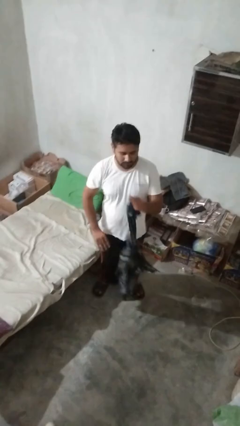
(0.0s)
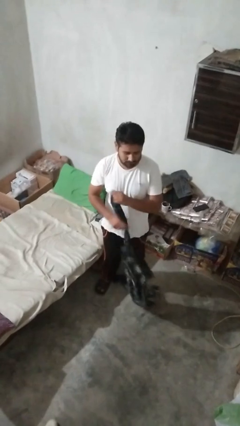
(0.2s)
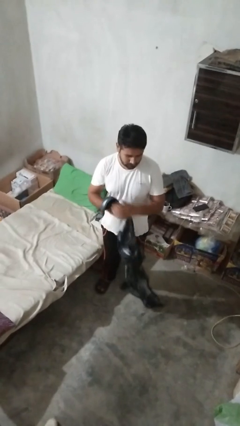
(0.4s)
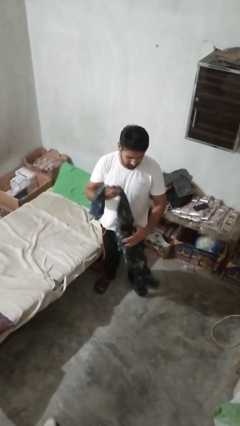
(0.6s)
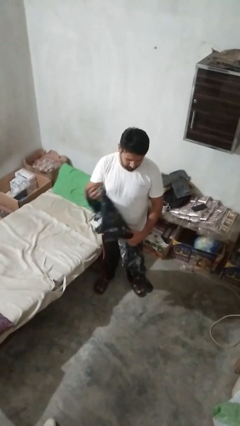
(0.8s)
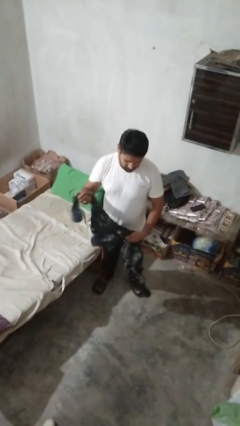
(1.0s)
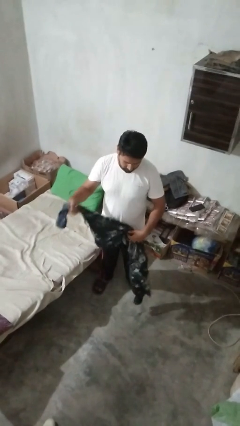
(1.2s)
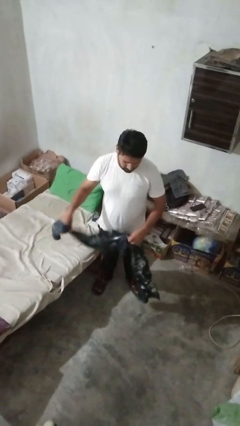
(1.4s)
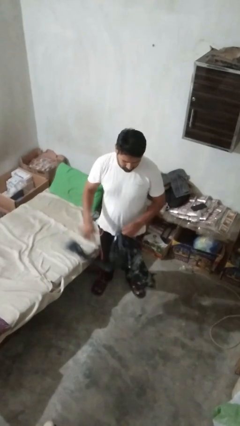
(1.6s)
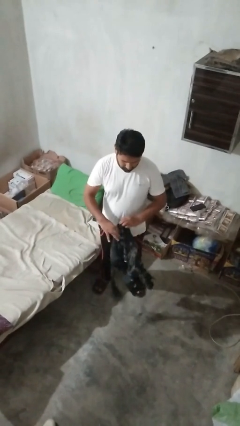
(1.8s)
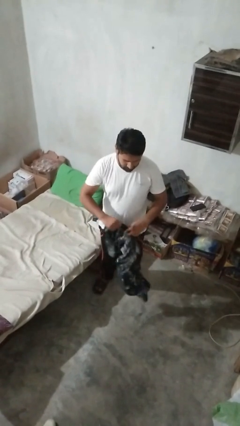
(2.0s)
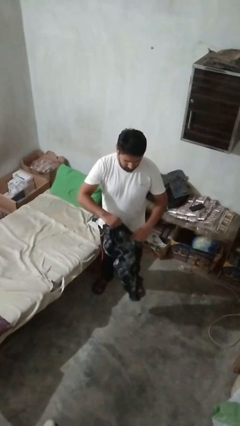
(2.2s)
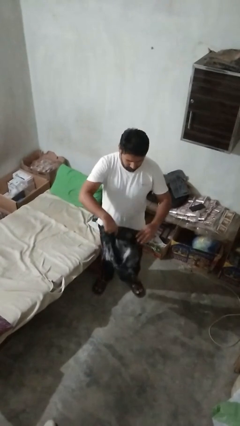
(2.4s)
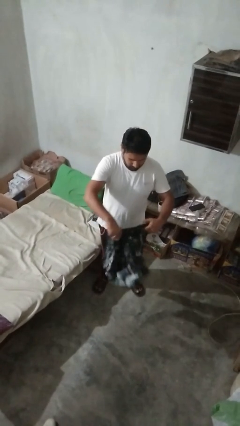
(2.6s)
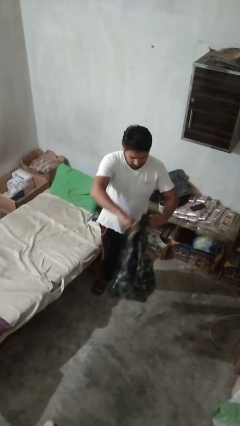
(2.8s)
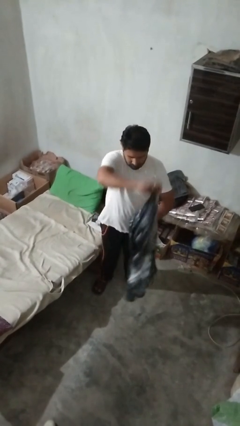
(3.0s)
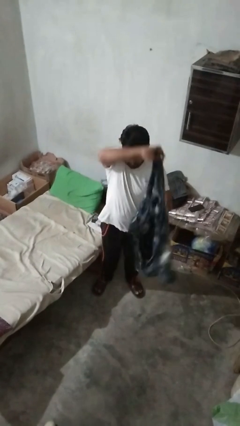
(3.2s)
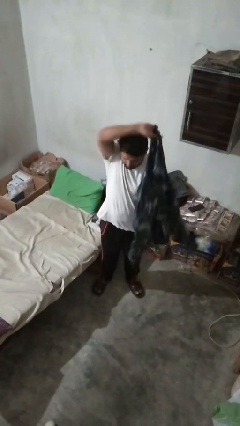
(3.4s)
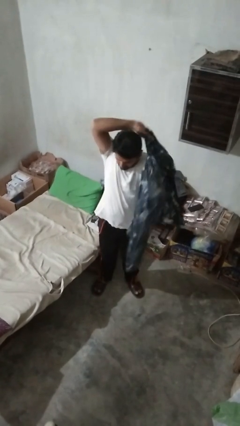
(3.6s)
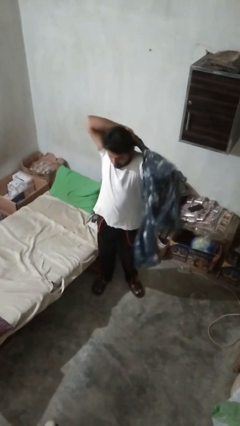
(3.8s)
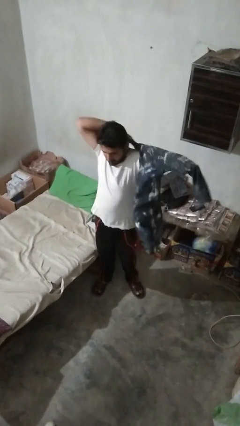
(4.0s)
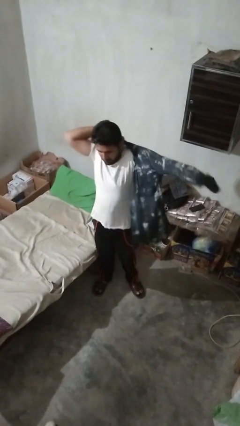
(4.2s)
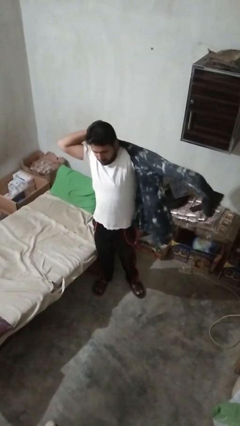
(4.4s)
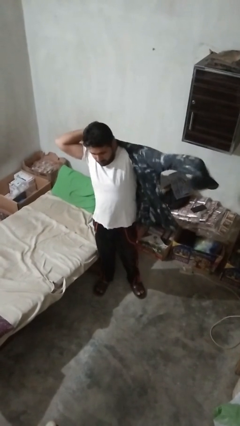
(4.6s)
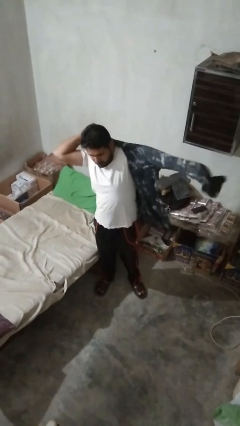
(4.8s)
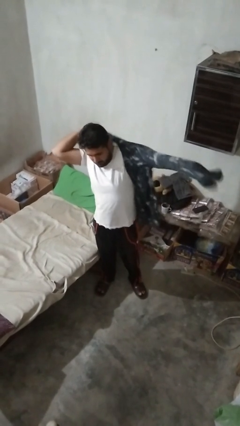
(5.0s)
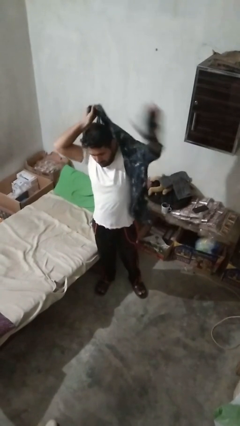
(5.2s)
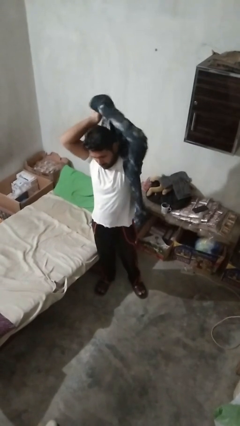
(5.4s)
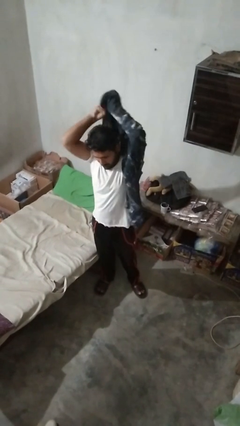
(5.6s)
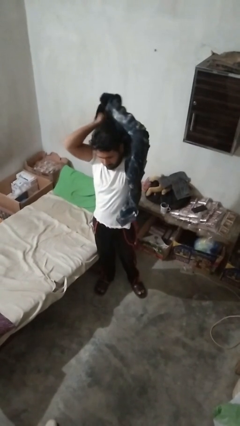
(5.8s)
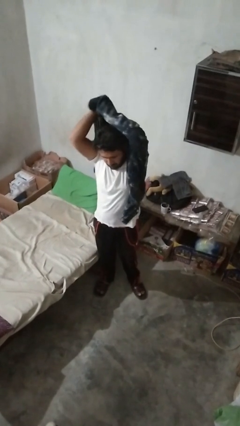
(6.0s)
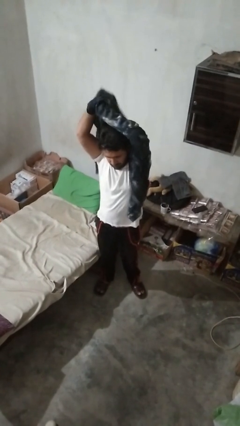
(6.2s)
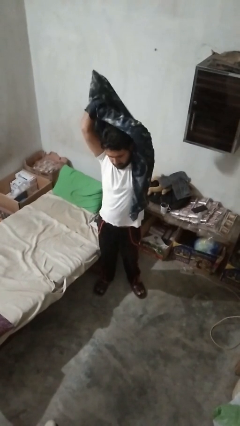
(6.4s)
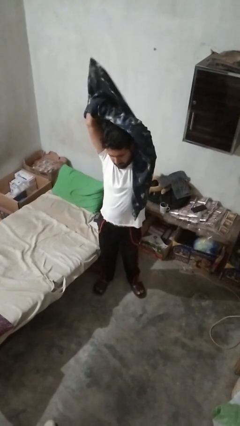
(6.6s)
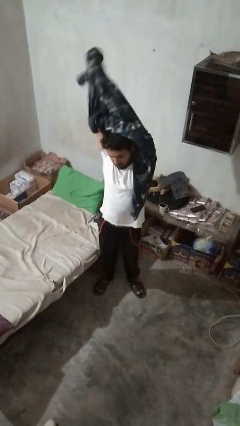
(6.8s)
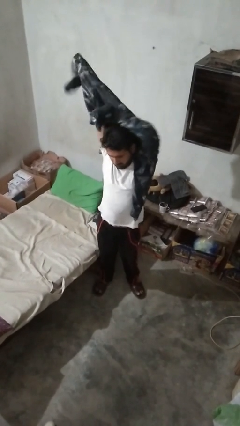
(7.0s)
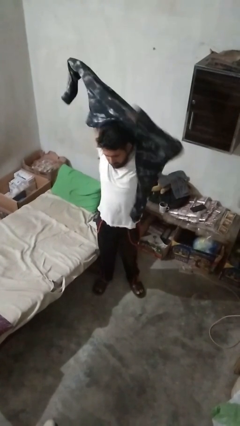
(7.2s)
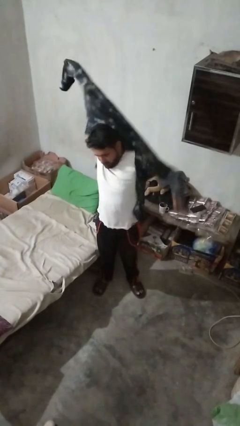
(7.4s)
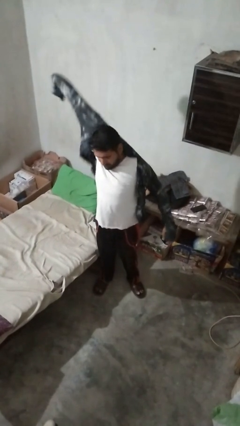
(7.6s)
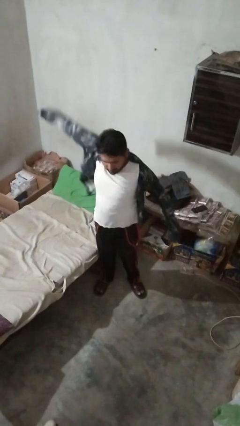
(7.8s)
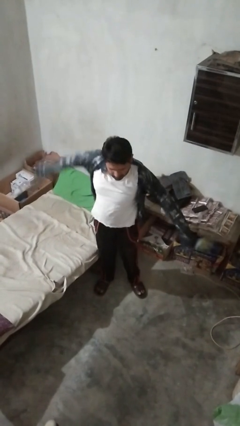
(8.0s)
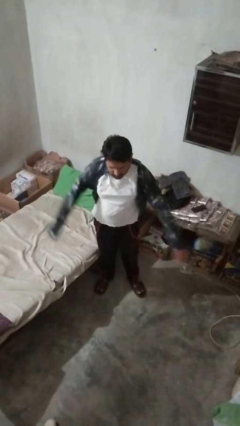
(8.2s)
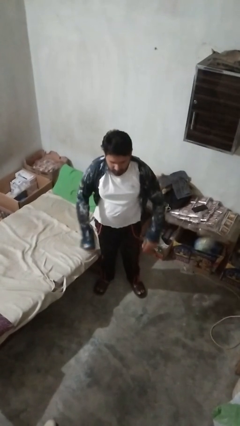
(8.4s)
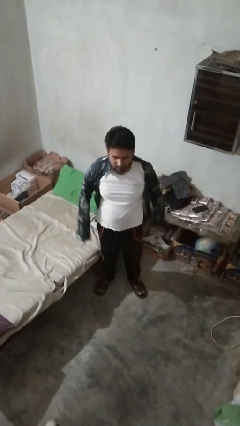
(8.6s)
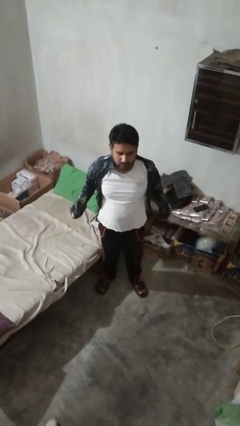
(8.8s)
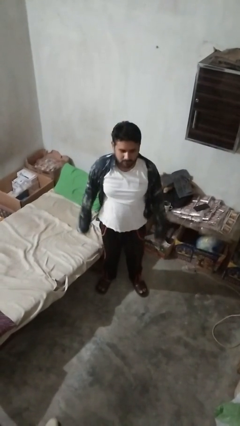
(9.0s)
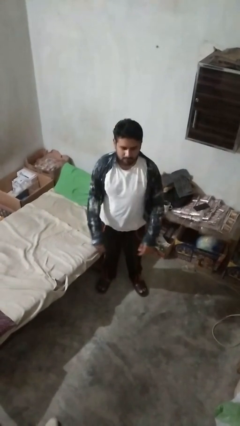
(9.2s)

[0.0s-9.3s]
person puts on shirt

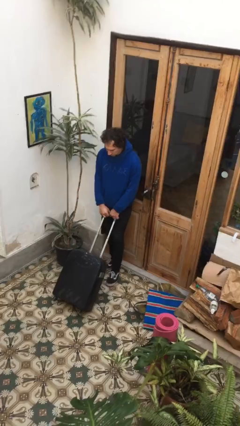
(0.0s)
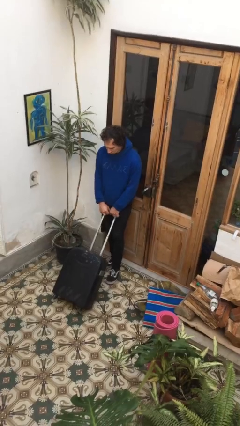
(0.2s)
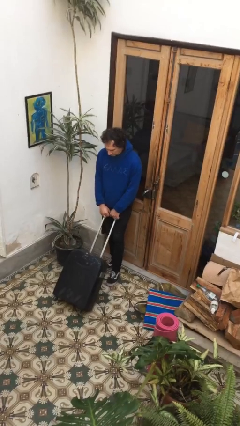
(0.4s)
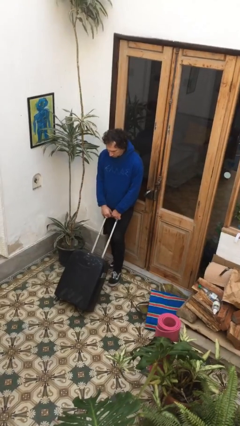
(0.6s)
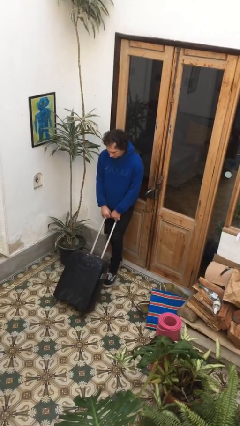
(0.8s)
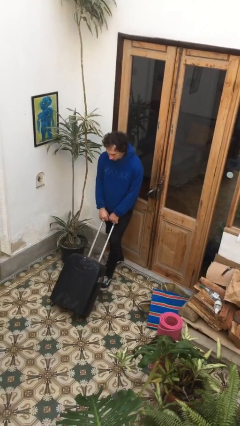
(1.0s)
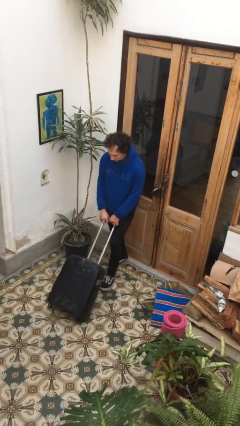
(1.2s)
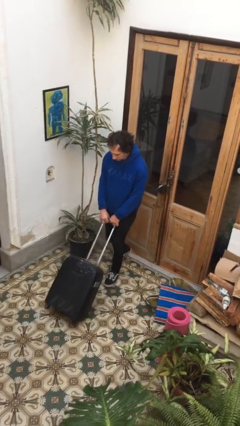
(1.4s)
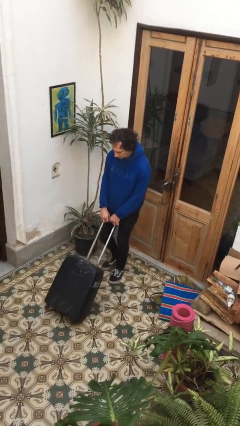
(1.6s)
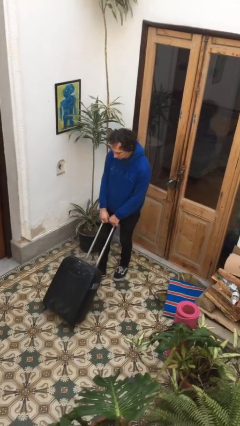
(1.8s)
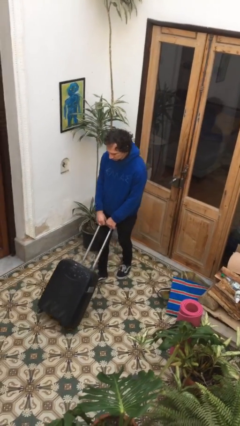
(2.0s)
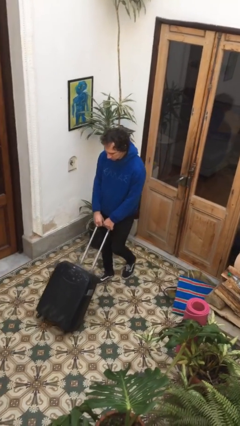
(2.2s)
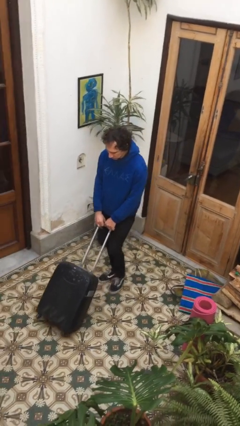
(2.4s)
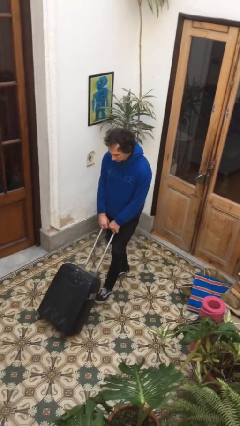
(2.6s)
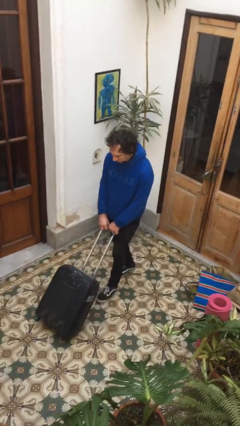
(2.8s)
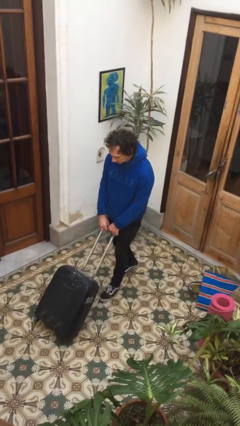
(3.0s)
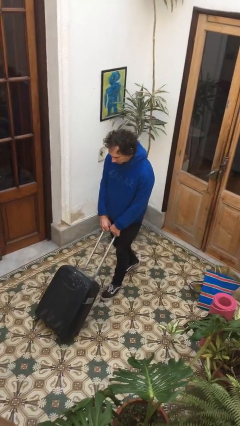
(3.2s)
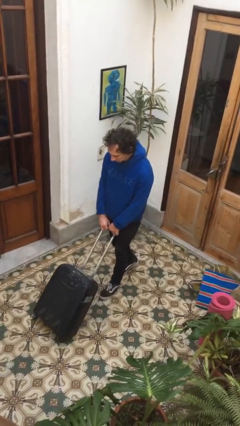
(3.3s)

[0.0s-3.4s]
person pushes wheeled cart

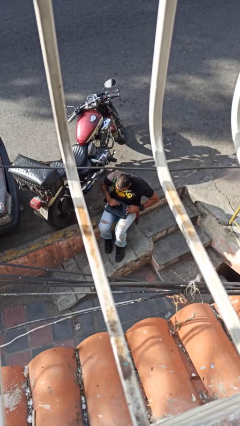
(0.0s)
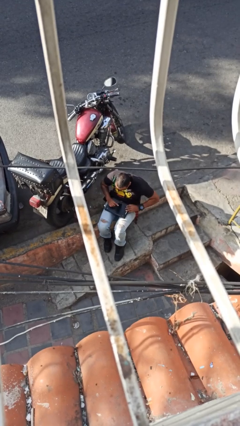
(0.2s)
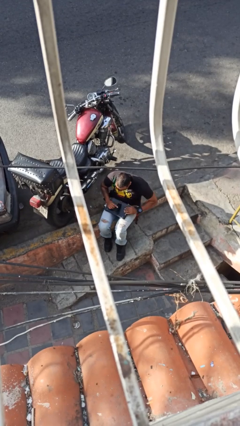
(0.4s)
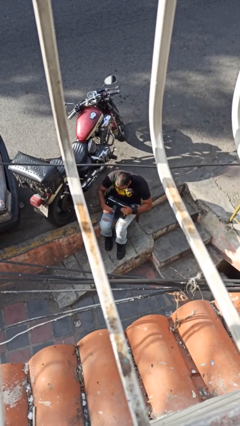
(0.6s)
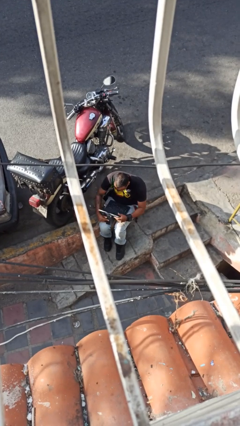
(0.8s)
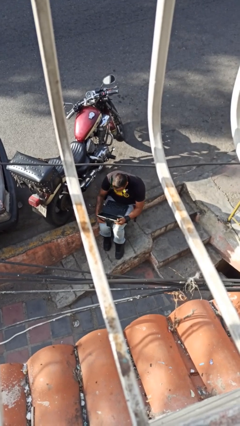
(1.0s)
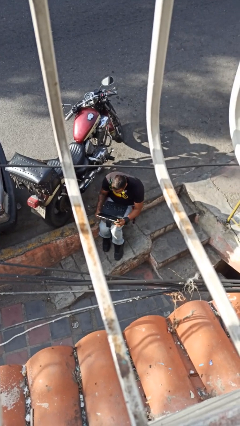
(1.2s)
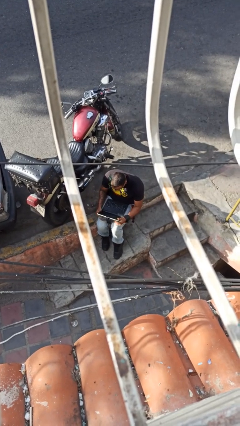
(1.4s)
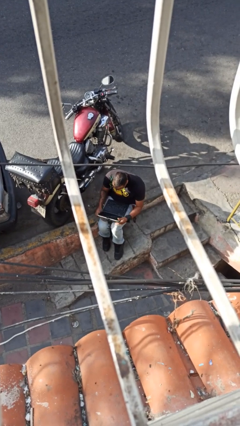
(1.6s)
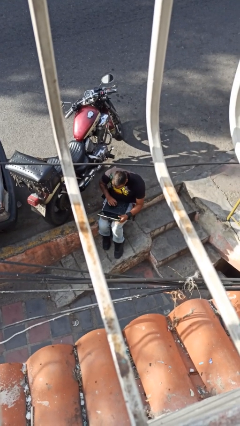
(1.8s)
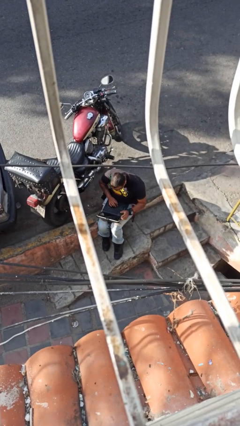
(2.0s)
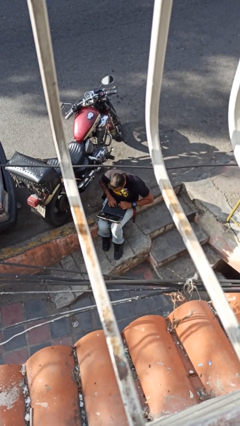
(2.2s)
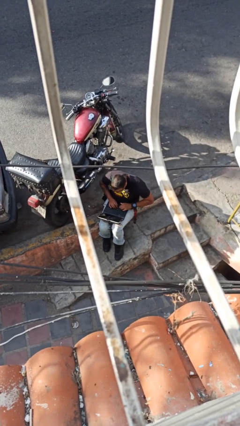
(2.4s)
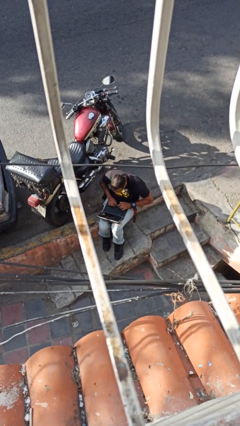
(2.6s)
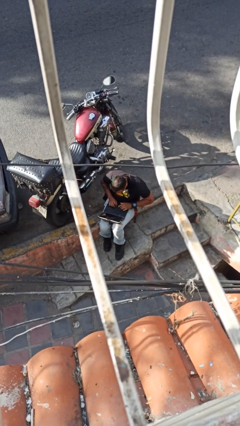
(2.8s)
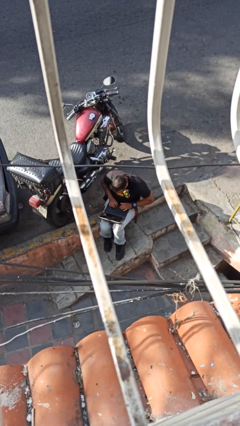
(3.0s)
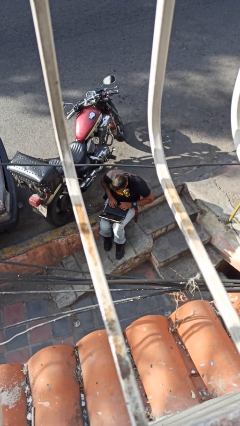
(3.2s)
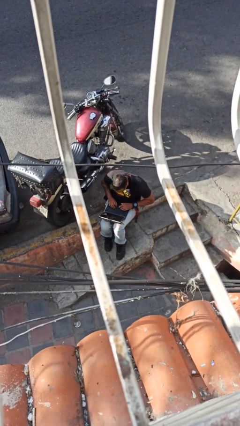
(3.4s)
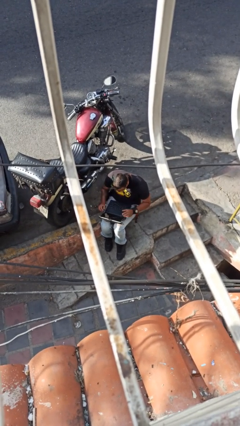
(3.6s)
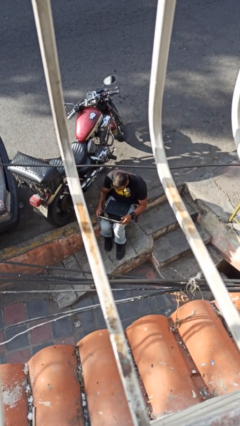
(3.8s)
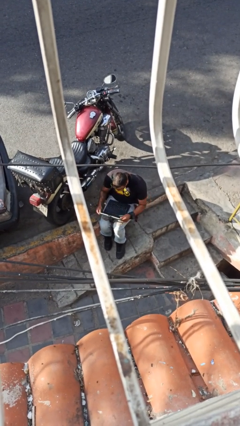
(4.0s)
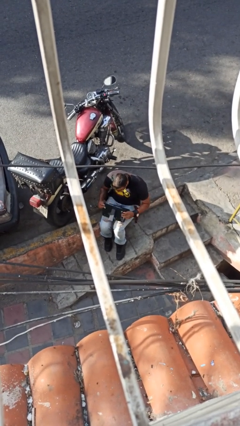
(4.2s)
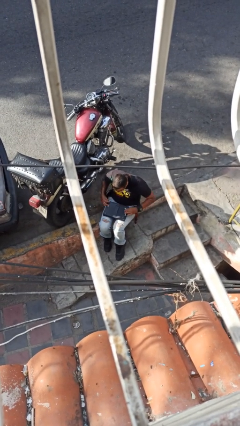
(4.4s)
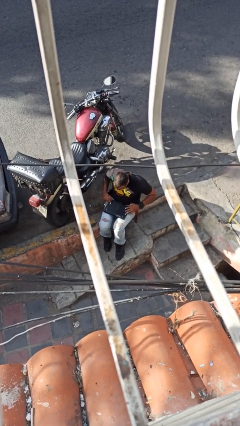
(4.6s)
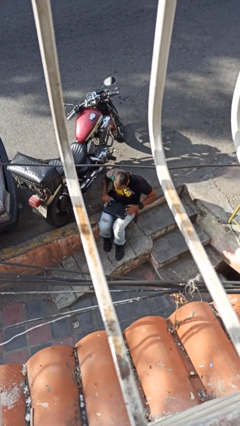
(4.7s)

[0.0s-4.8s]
person interacts with laptop

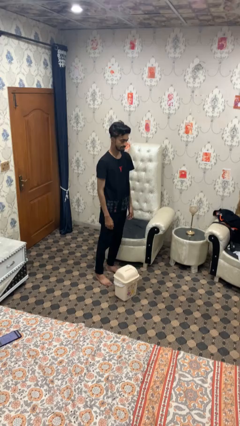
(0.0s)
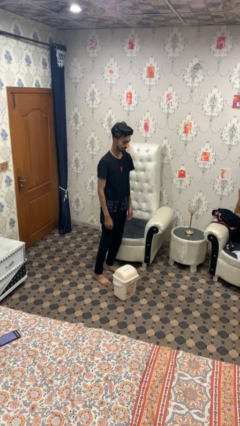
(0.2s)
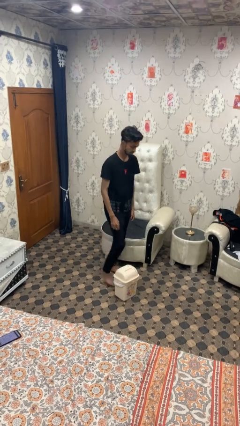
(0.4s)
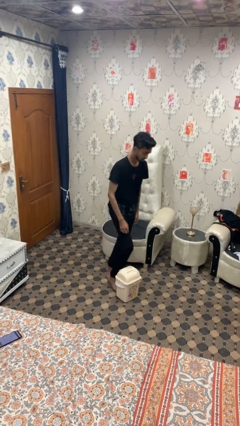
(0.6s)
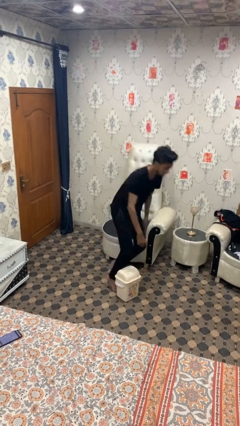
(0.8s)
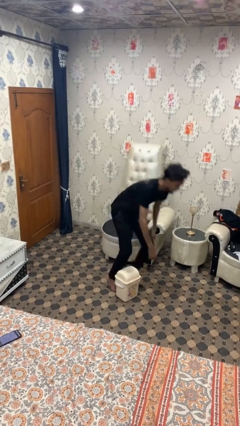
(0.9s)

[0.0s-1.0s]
person trips on object on floor
